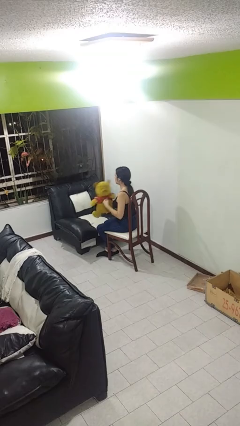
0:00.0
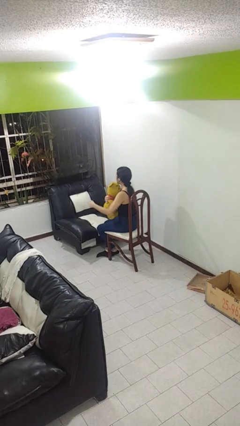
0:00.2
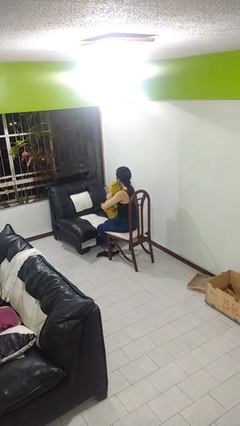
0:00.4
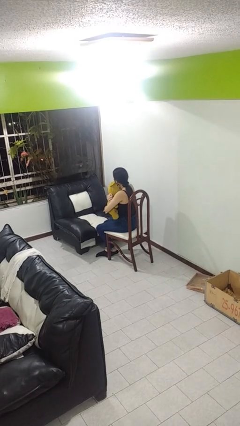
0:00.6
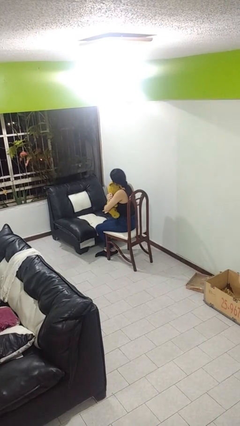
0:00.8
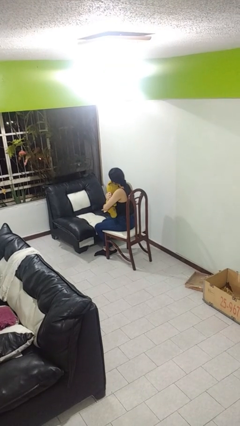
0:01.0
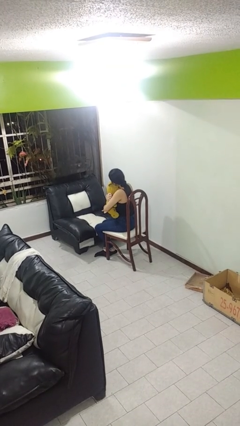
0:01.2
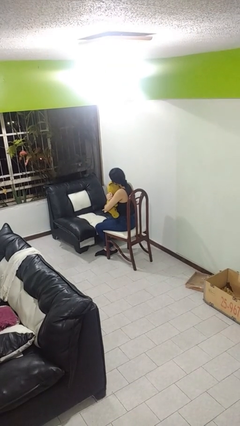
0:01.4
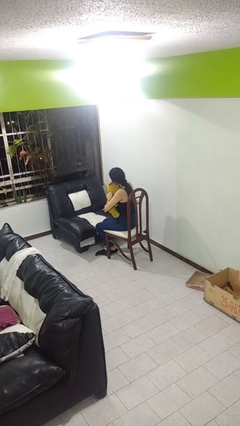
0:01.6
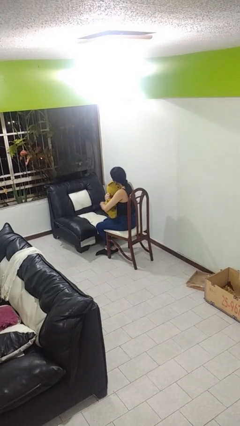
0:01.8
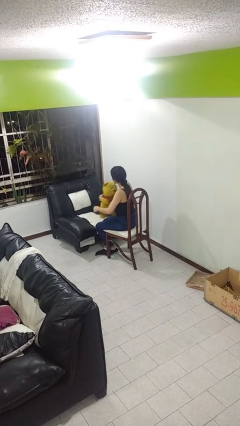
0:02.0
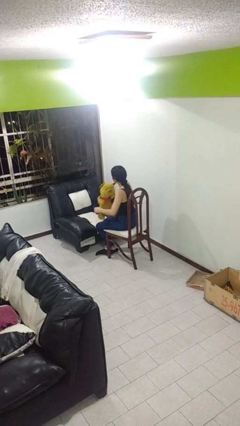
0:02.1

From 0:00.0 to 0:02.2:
person hugs stuffed animal

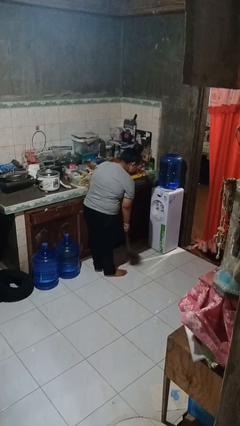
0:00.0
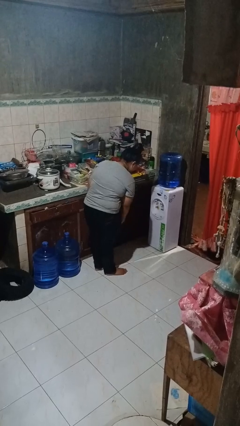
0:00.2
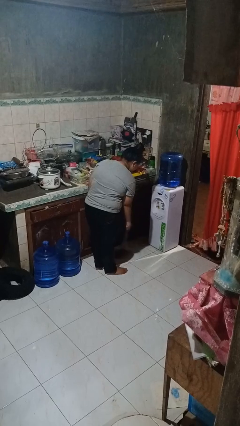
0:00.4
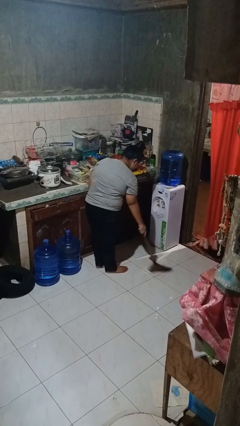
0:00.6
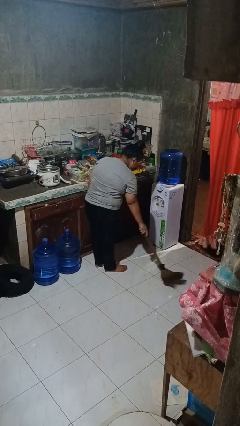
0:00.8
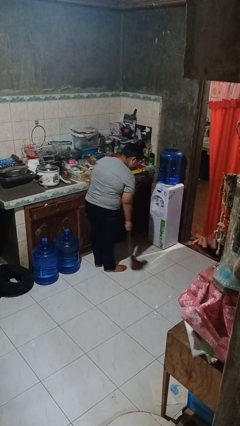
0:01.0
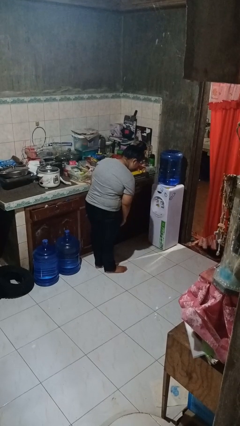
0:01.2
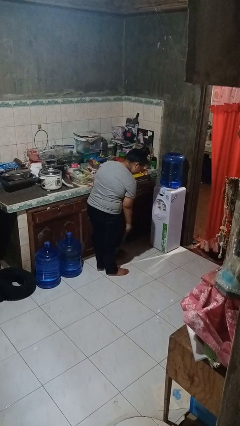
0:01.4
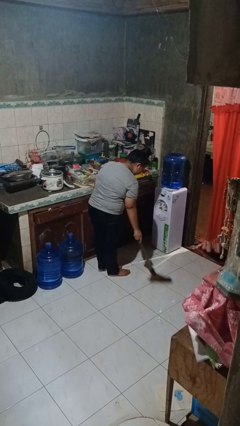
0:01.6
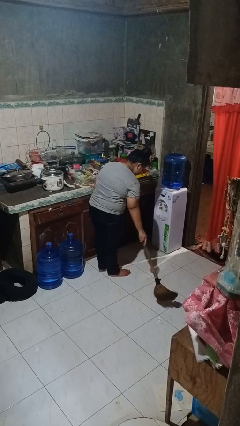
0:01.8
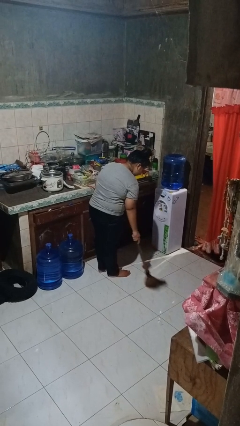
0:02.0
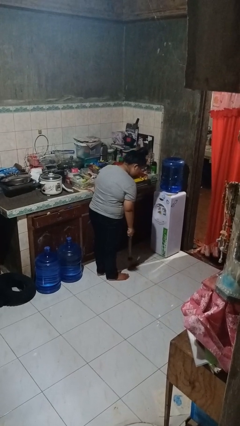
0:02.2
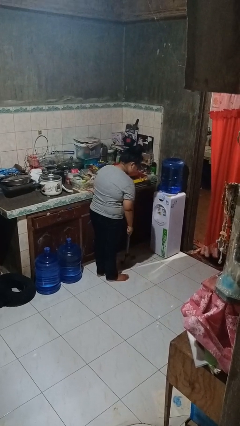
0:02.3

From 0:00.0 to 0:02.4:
person sweeps floor

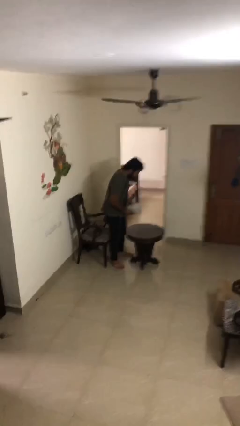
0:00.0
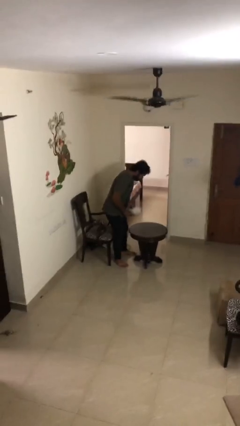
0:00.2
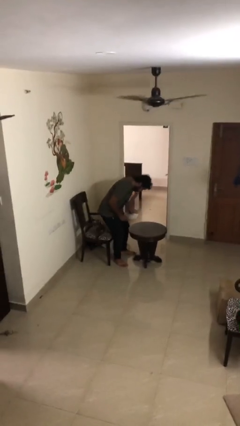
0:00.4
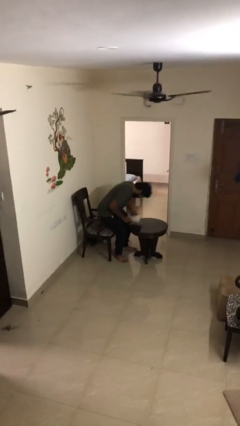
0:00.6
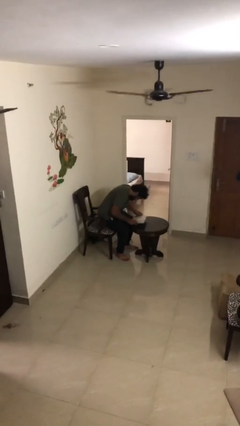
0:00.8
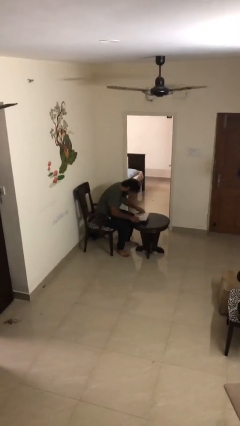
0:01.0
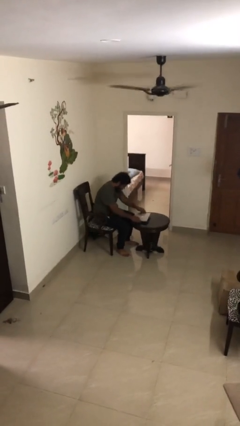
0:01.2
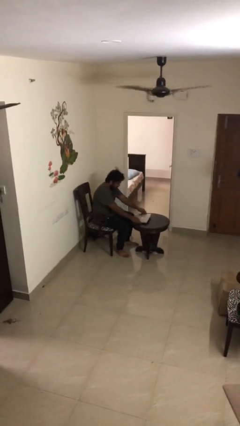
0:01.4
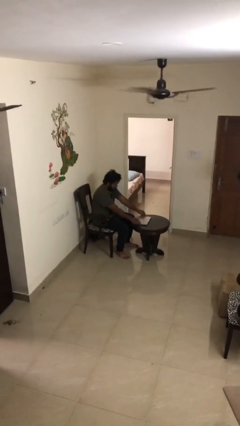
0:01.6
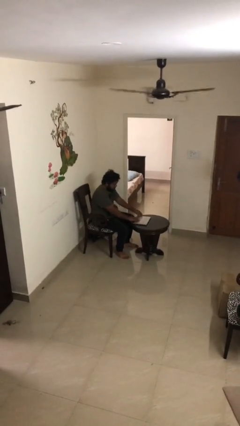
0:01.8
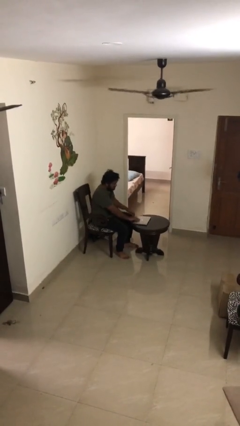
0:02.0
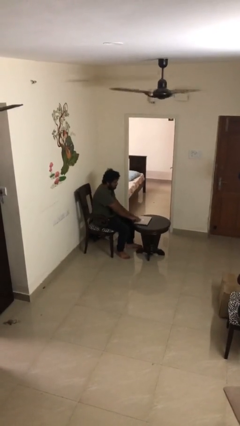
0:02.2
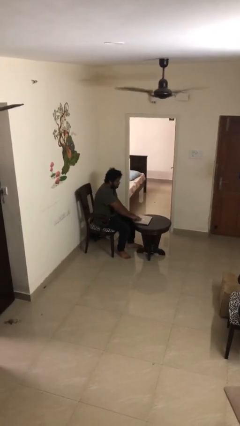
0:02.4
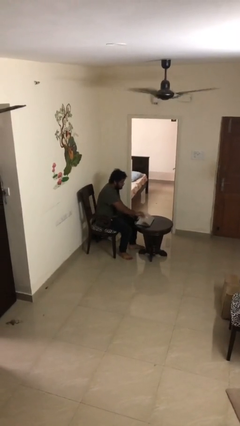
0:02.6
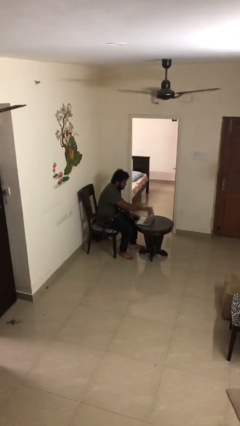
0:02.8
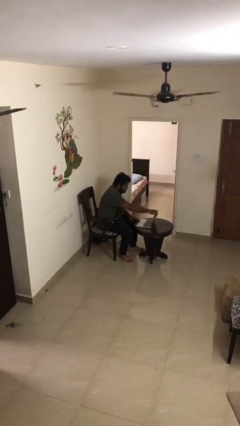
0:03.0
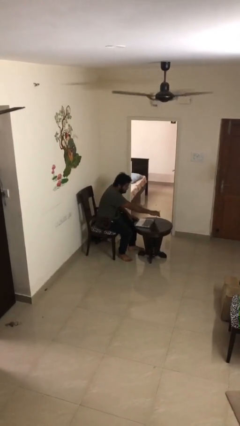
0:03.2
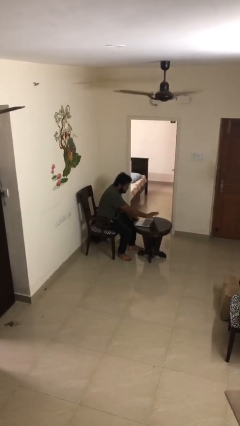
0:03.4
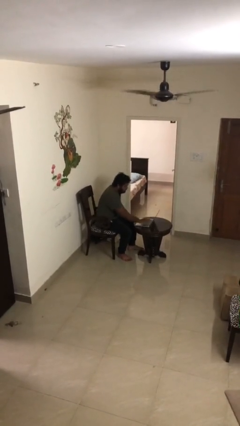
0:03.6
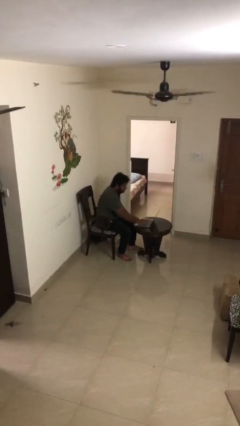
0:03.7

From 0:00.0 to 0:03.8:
person sits down

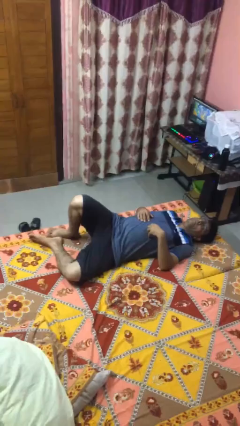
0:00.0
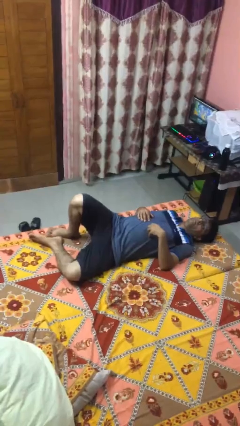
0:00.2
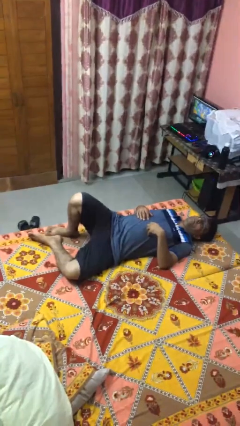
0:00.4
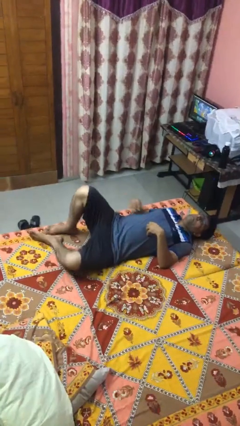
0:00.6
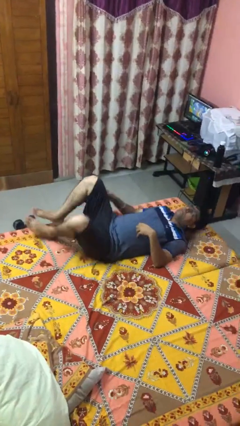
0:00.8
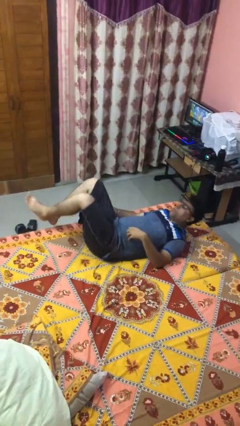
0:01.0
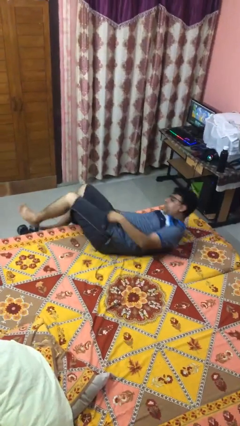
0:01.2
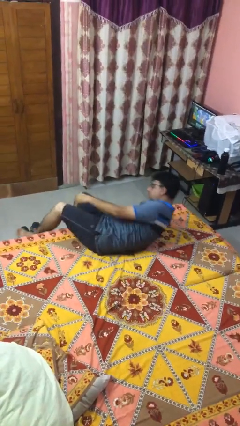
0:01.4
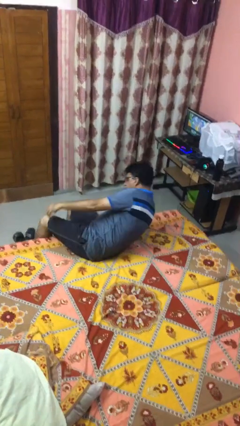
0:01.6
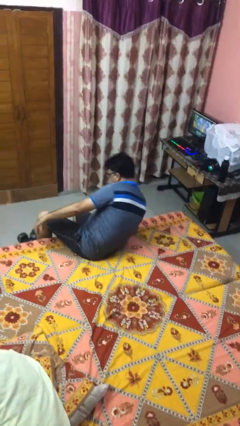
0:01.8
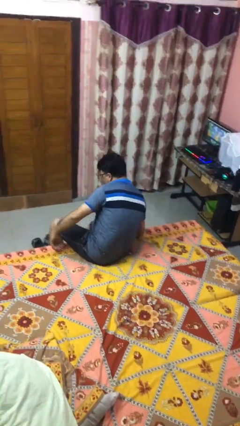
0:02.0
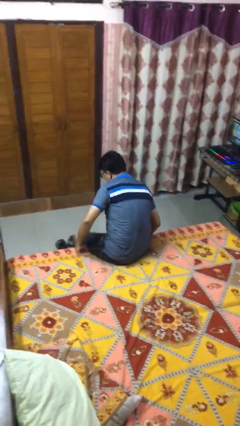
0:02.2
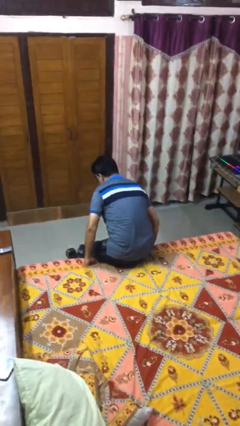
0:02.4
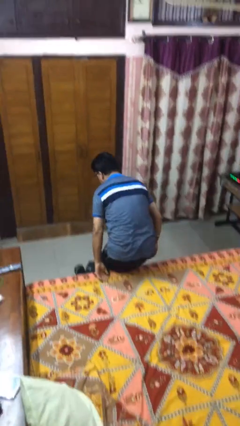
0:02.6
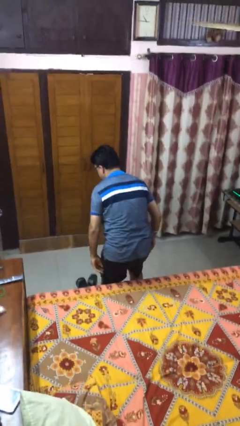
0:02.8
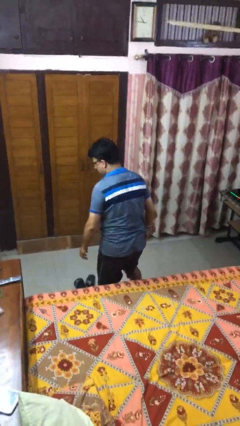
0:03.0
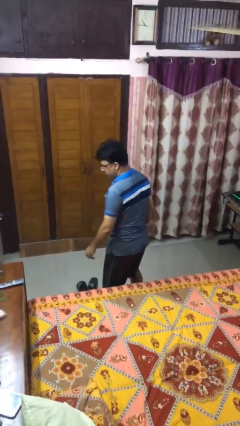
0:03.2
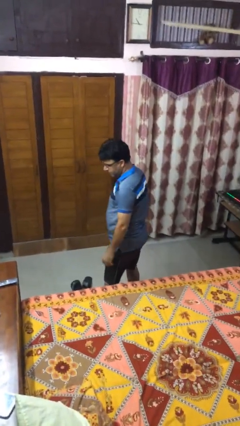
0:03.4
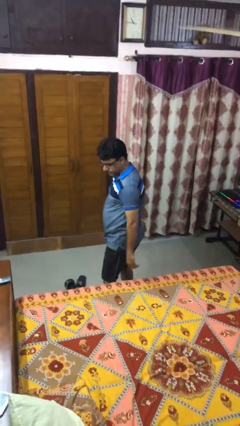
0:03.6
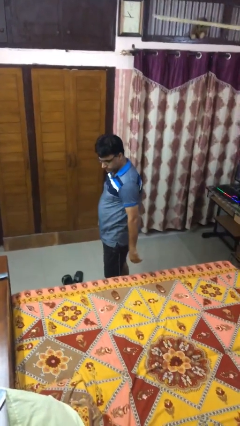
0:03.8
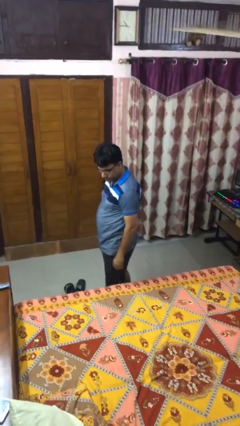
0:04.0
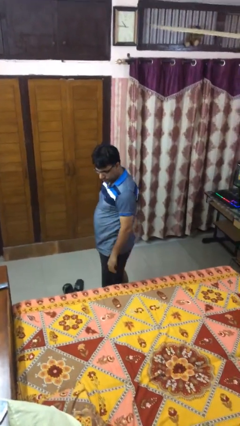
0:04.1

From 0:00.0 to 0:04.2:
person stands up

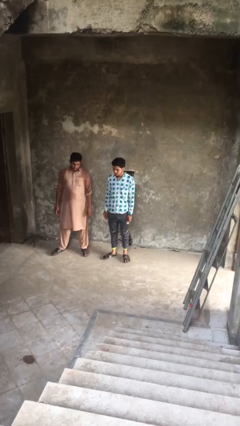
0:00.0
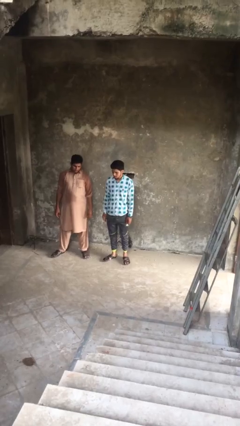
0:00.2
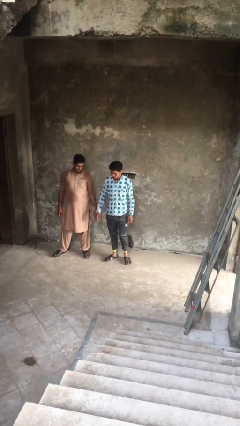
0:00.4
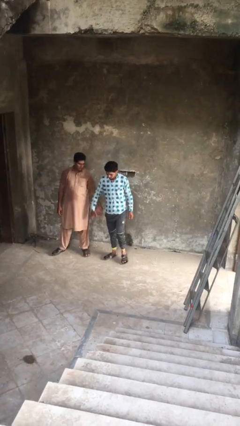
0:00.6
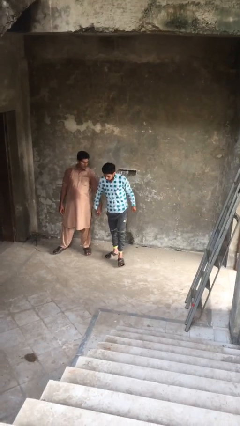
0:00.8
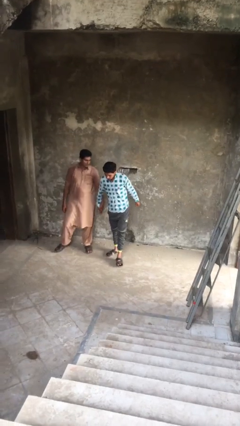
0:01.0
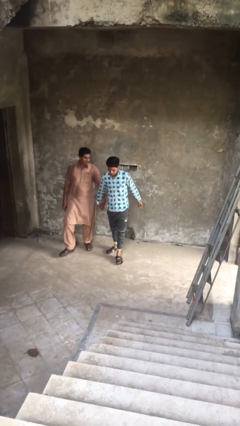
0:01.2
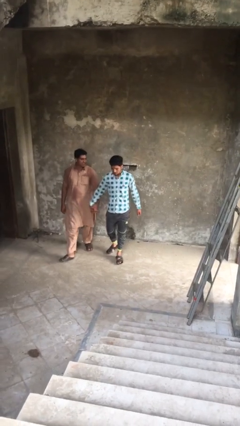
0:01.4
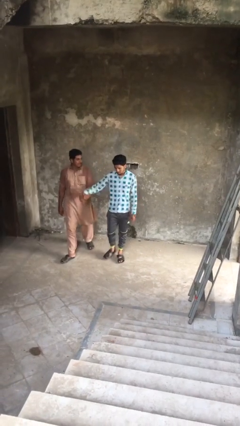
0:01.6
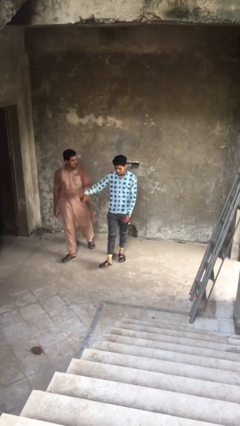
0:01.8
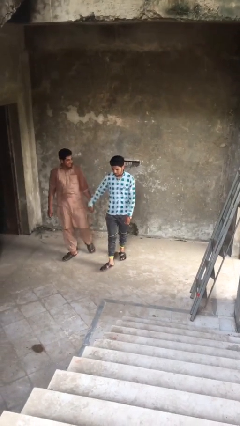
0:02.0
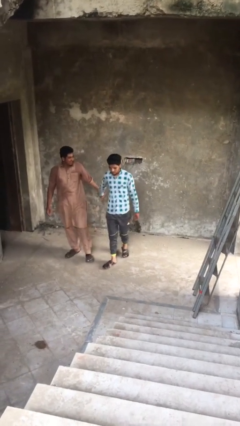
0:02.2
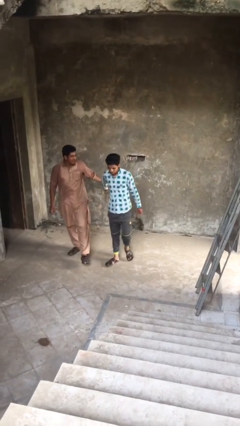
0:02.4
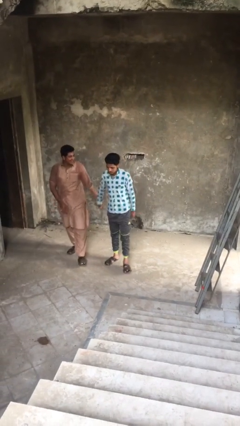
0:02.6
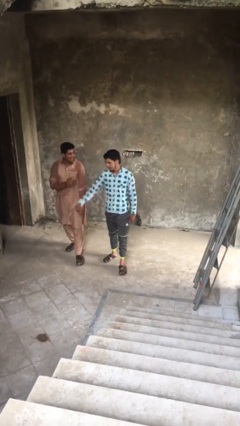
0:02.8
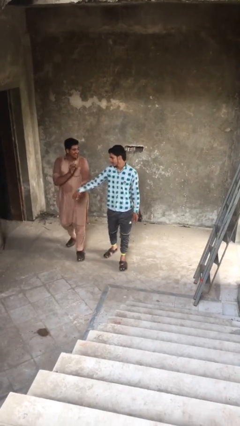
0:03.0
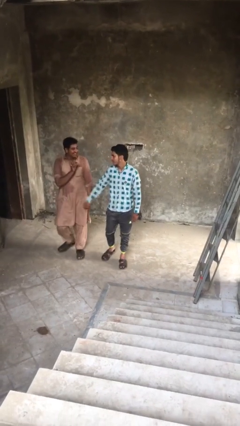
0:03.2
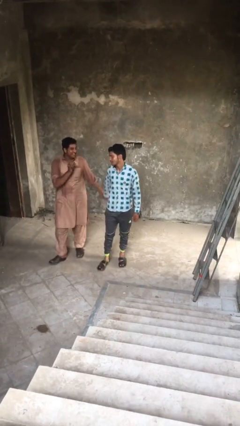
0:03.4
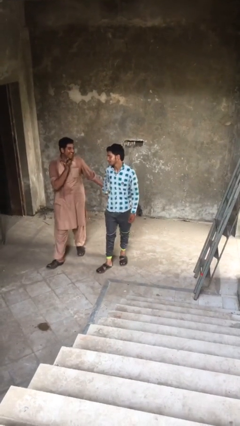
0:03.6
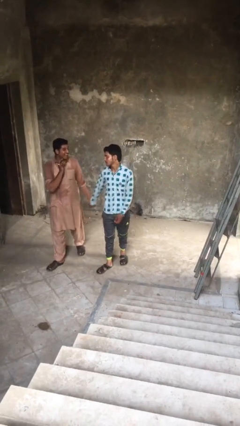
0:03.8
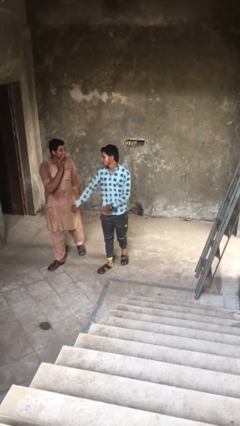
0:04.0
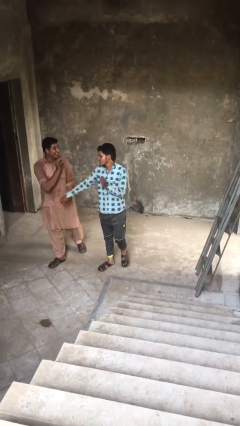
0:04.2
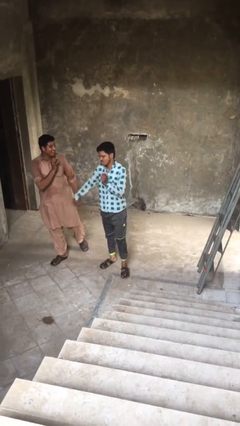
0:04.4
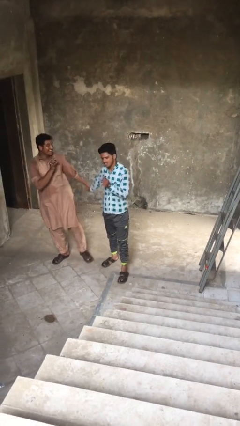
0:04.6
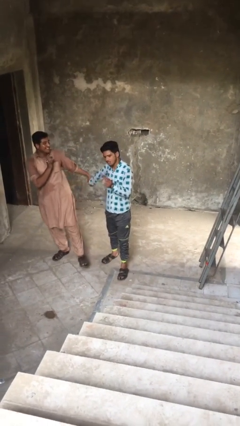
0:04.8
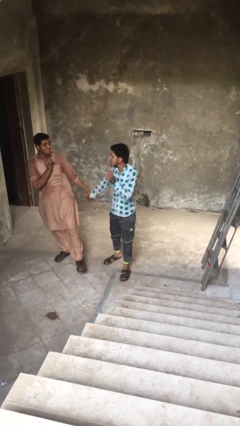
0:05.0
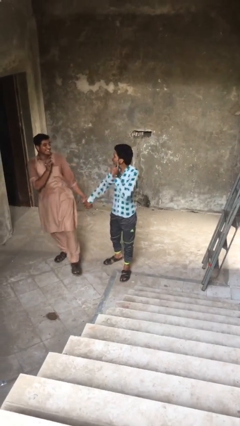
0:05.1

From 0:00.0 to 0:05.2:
person holds hand
